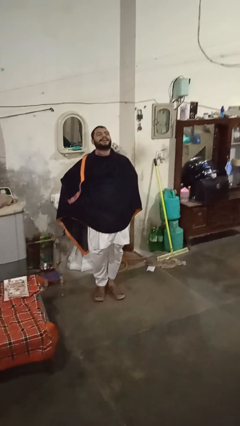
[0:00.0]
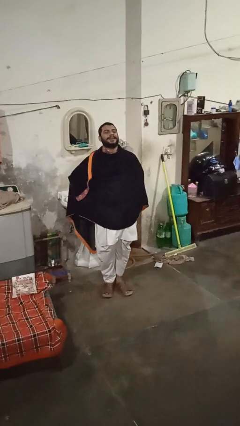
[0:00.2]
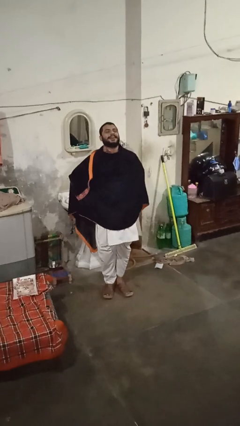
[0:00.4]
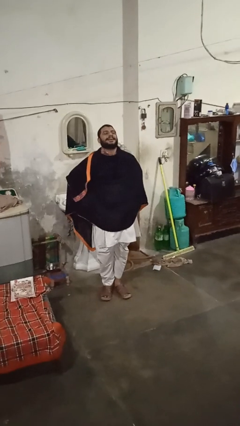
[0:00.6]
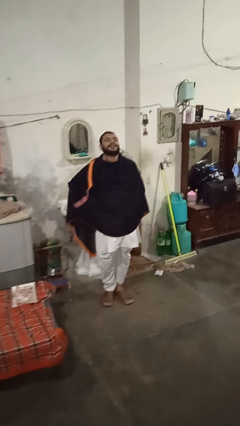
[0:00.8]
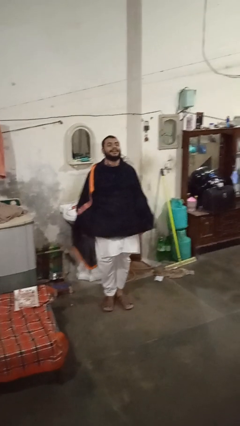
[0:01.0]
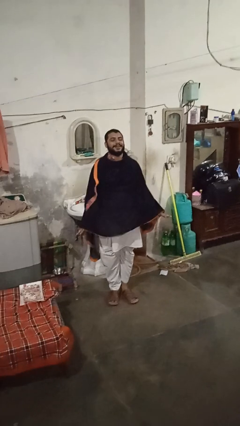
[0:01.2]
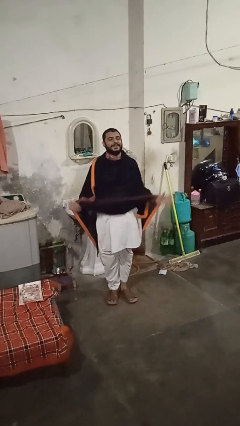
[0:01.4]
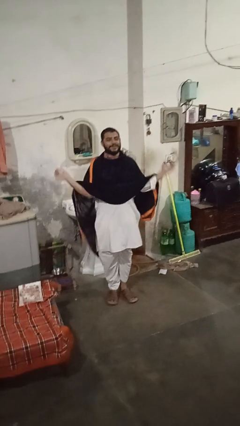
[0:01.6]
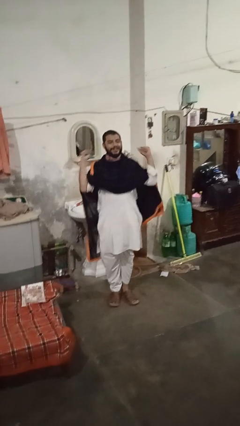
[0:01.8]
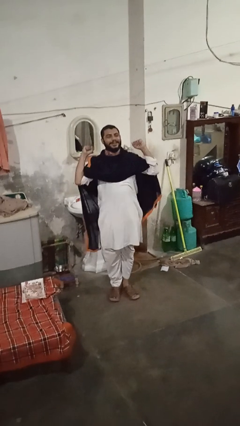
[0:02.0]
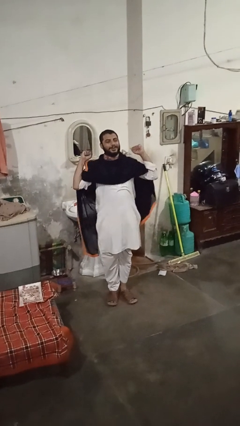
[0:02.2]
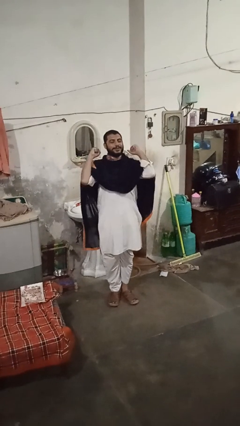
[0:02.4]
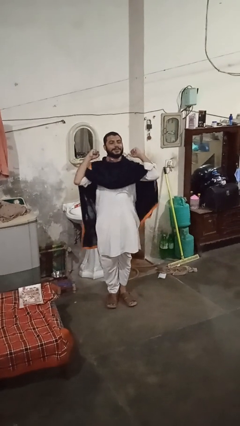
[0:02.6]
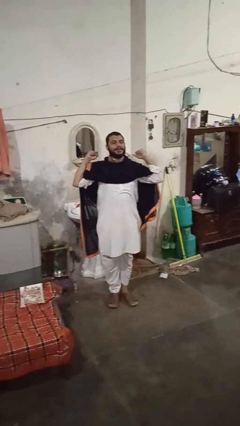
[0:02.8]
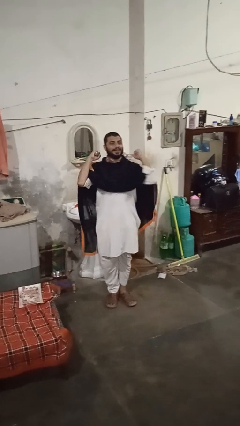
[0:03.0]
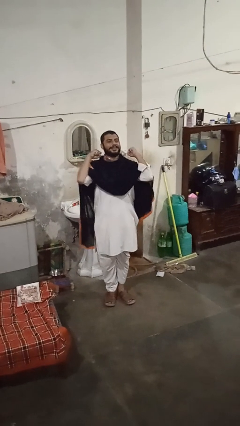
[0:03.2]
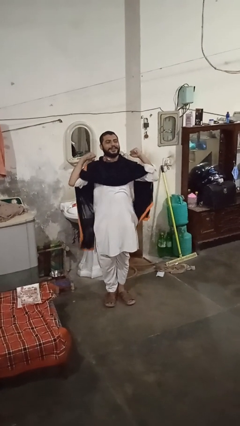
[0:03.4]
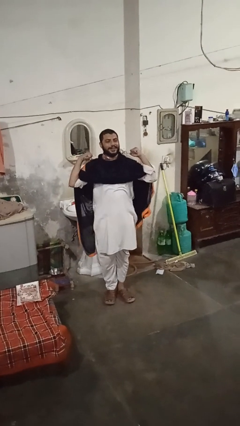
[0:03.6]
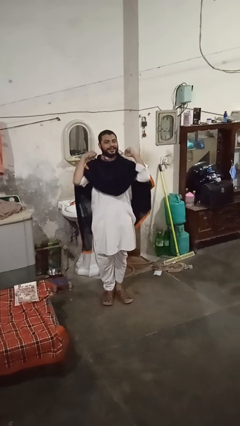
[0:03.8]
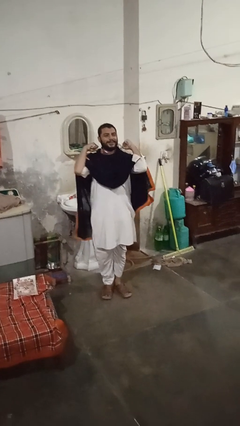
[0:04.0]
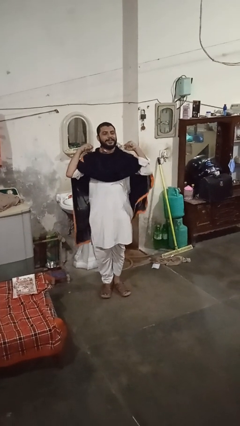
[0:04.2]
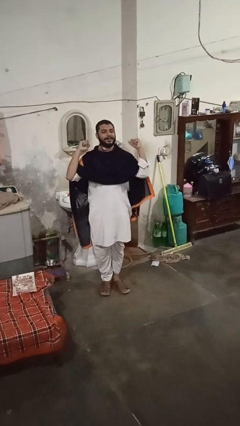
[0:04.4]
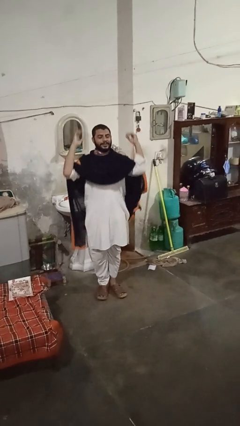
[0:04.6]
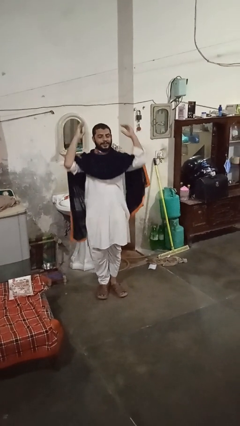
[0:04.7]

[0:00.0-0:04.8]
person stretches arms to side

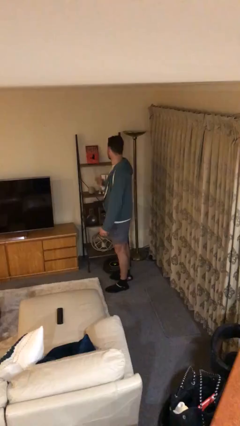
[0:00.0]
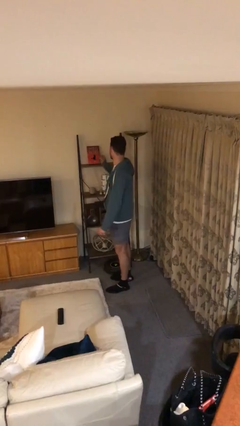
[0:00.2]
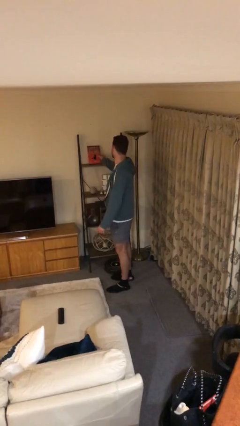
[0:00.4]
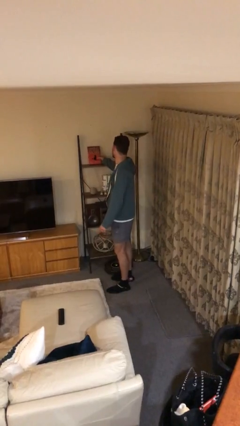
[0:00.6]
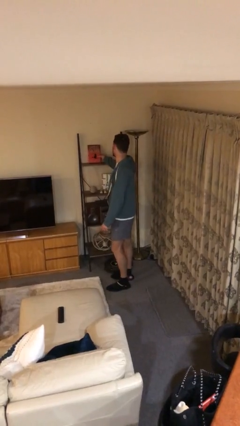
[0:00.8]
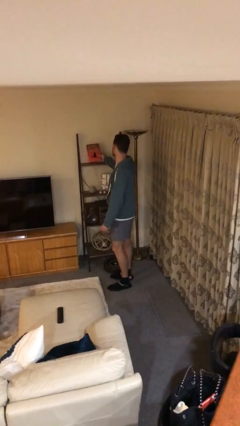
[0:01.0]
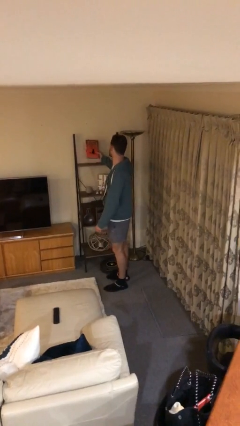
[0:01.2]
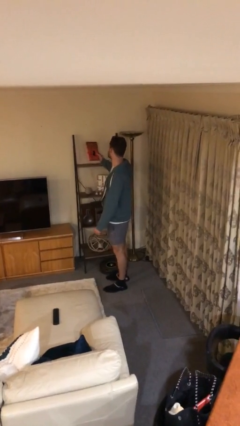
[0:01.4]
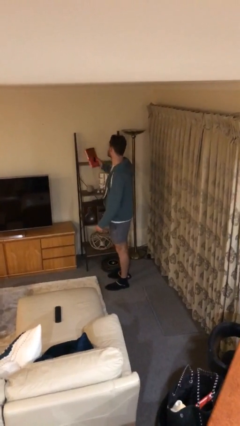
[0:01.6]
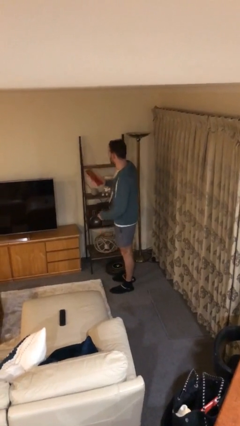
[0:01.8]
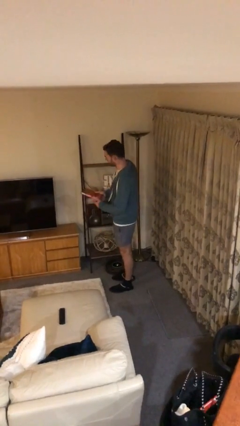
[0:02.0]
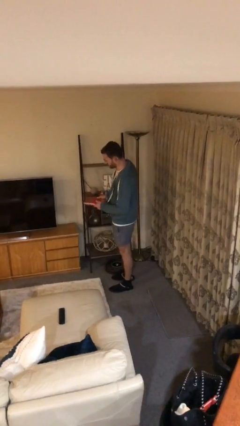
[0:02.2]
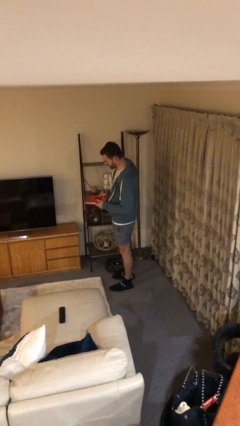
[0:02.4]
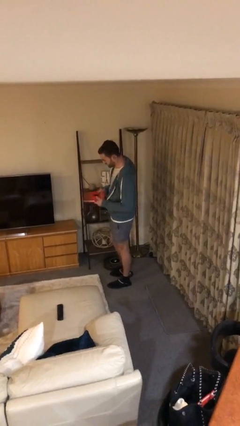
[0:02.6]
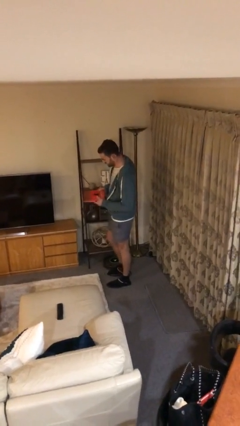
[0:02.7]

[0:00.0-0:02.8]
person picks up object from shelf

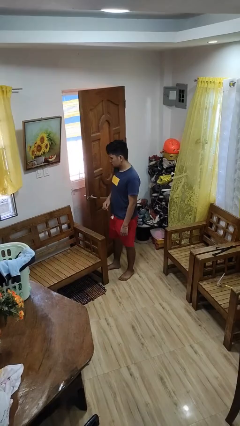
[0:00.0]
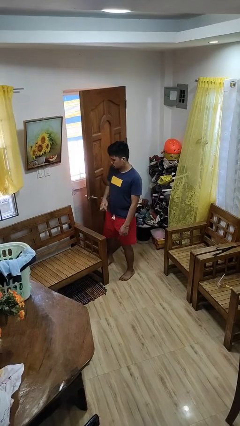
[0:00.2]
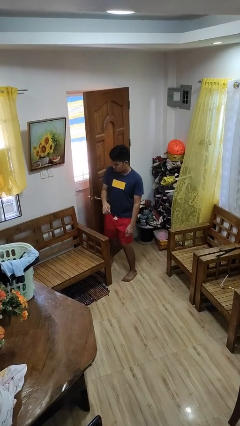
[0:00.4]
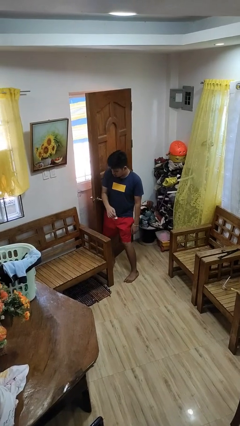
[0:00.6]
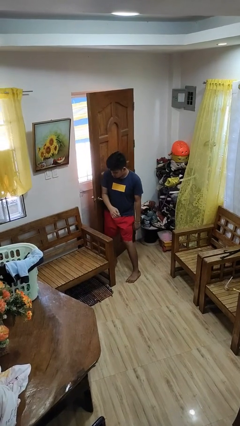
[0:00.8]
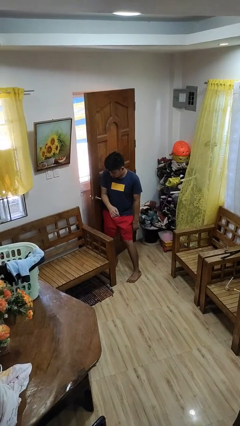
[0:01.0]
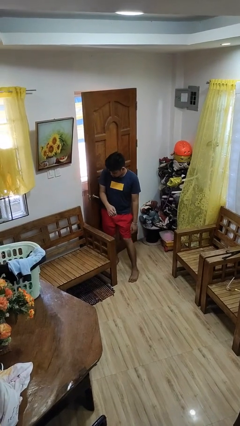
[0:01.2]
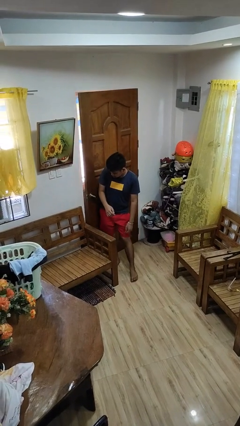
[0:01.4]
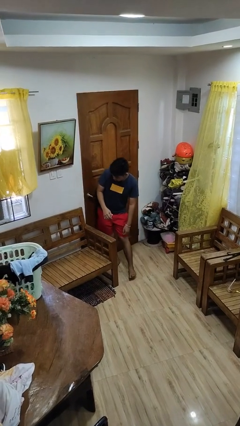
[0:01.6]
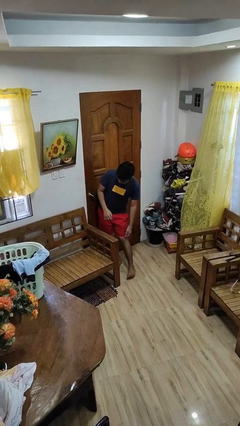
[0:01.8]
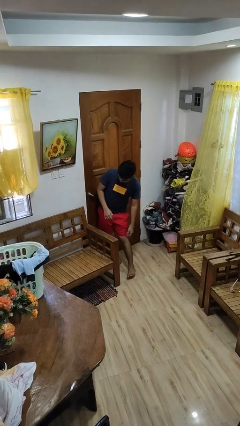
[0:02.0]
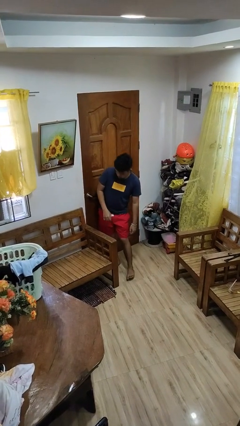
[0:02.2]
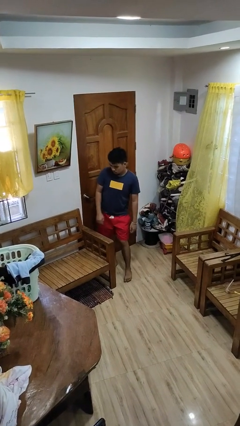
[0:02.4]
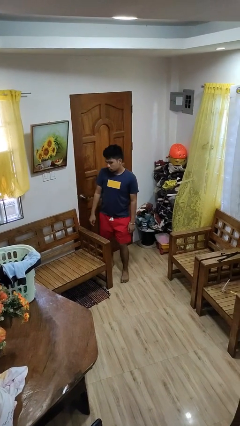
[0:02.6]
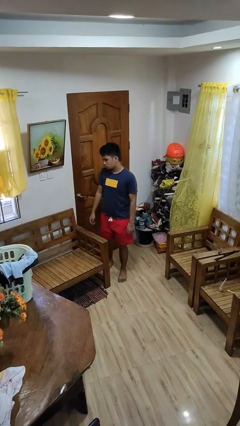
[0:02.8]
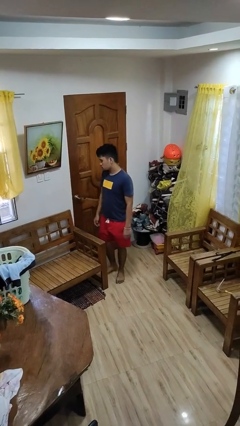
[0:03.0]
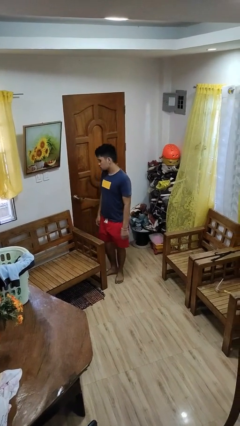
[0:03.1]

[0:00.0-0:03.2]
person closes door with hip

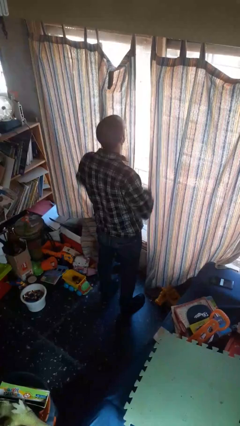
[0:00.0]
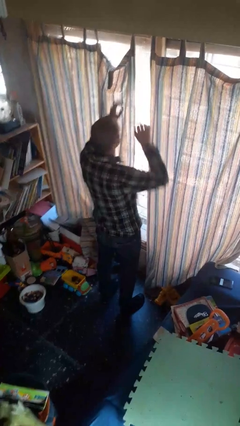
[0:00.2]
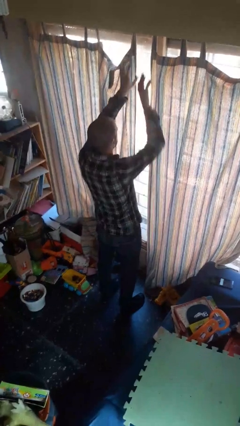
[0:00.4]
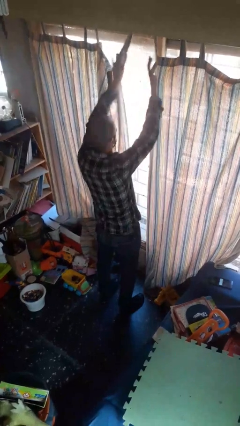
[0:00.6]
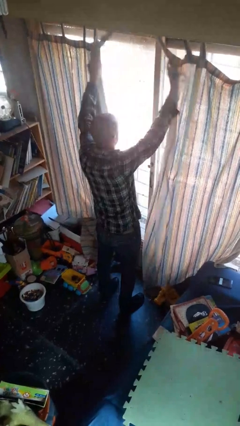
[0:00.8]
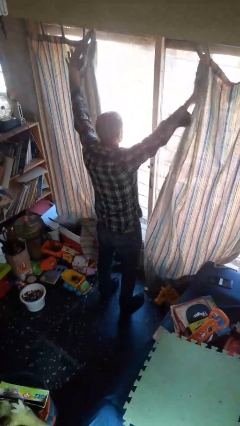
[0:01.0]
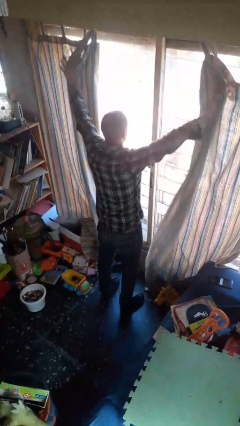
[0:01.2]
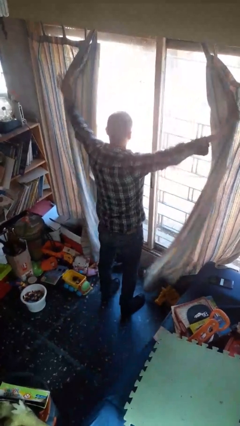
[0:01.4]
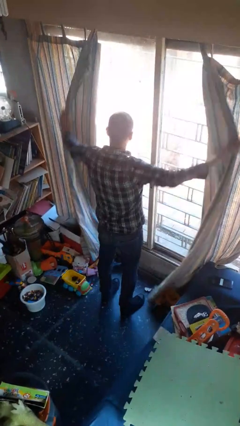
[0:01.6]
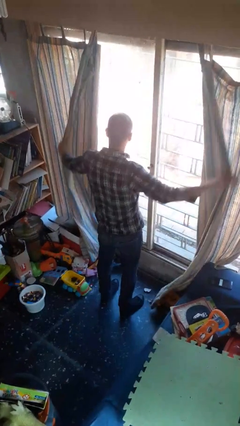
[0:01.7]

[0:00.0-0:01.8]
person opens curtains

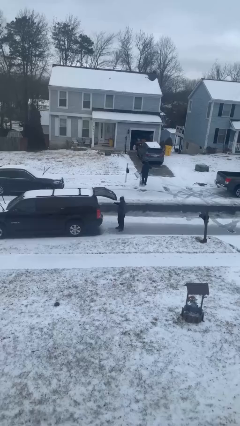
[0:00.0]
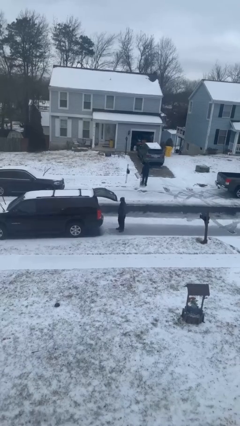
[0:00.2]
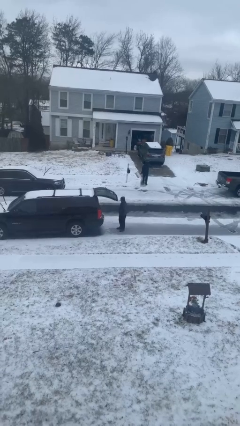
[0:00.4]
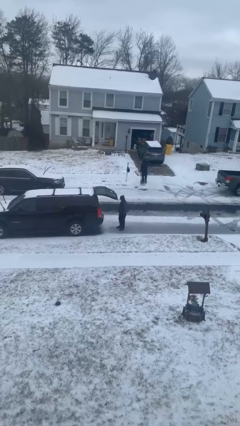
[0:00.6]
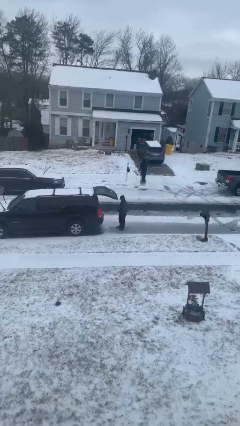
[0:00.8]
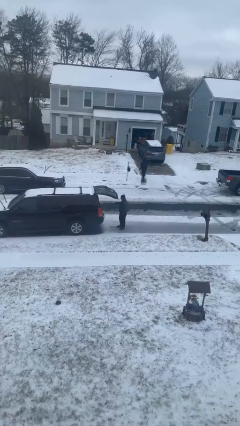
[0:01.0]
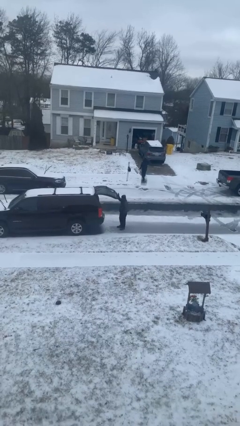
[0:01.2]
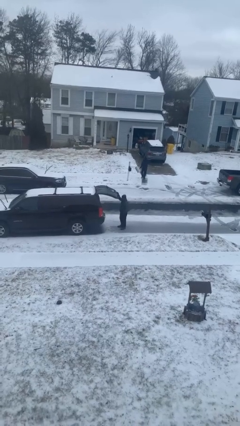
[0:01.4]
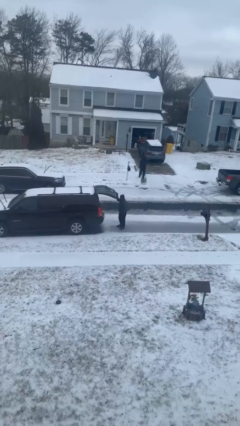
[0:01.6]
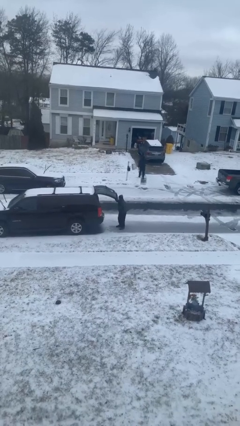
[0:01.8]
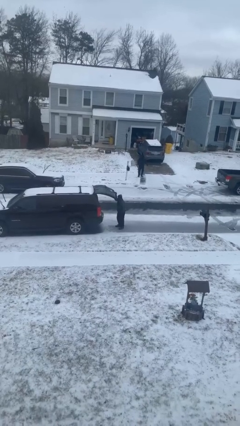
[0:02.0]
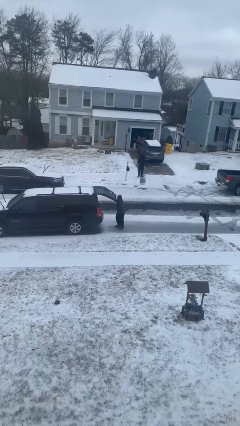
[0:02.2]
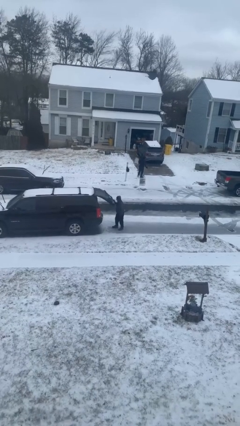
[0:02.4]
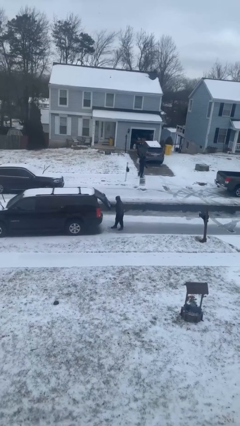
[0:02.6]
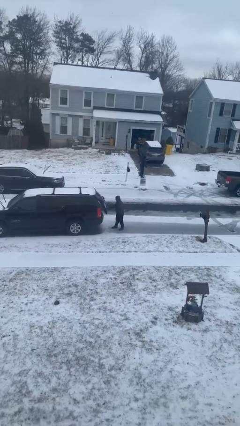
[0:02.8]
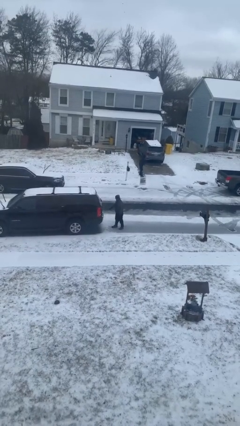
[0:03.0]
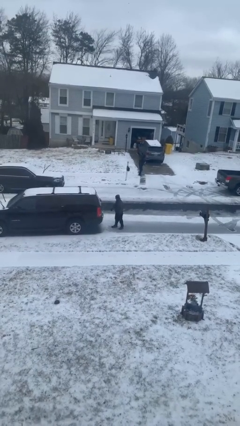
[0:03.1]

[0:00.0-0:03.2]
person closes car trunk

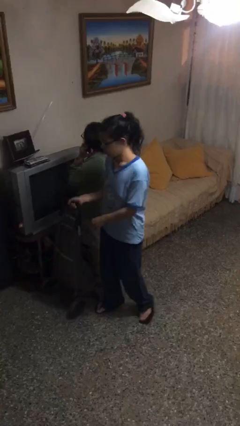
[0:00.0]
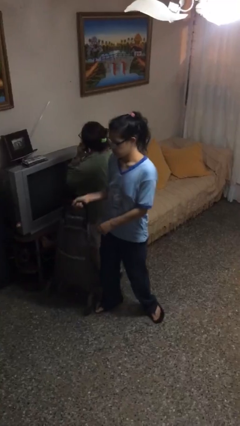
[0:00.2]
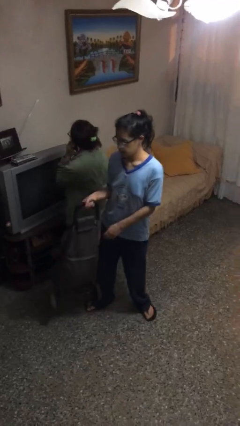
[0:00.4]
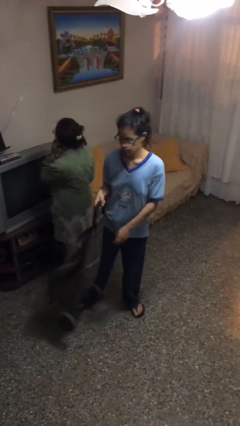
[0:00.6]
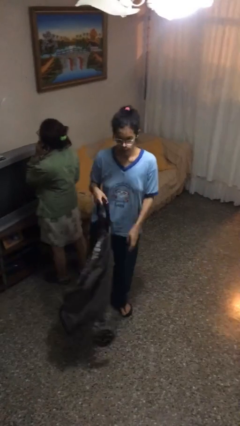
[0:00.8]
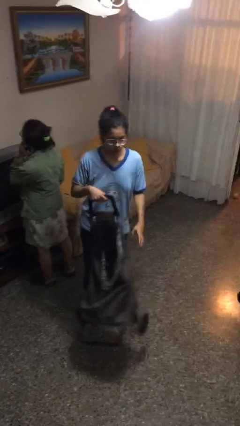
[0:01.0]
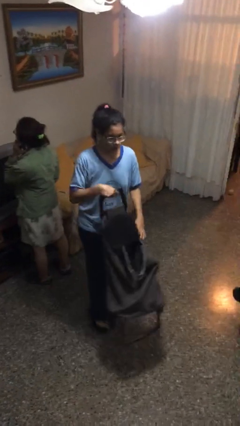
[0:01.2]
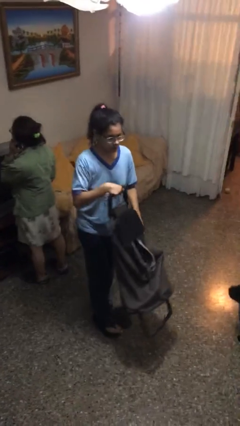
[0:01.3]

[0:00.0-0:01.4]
person steals object from person

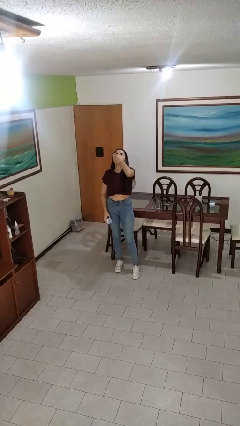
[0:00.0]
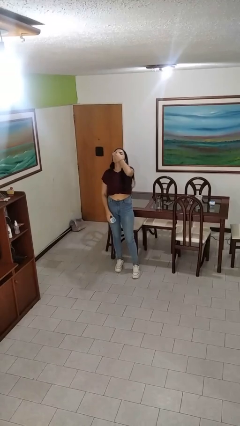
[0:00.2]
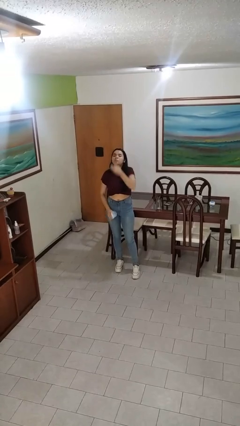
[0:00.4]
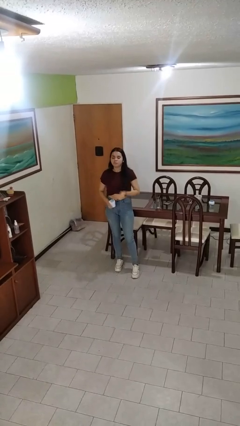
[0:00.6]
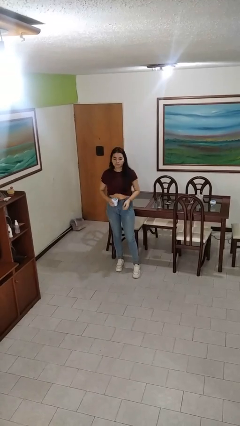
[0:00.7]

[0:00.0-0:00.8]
person takes medicine pills
